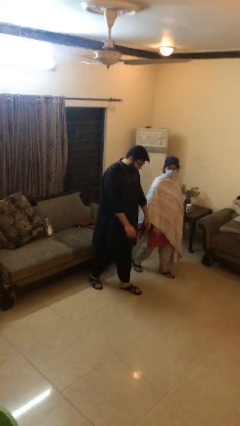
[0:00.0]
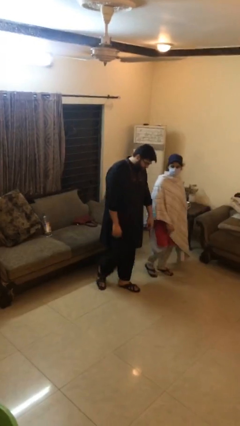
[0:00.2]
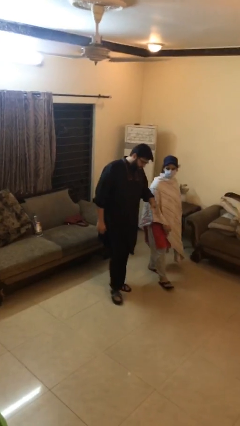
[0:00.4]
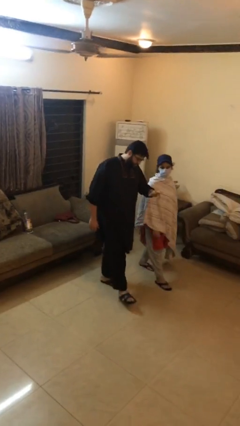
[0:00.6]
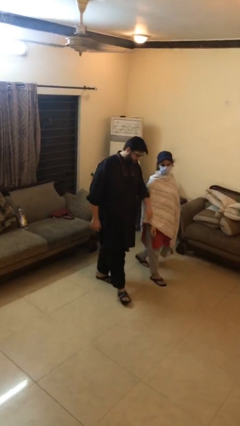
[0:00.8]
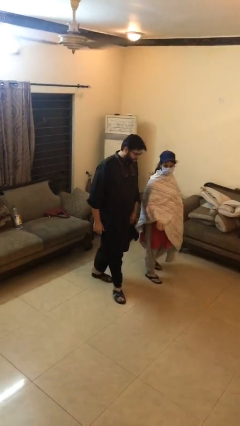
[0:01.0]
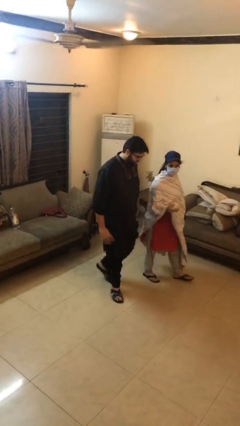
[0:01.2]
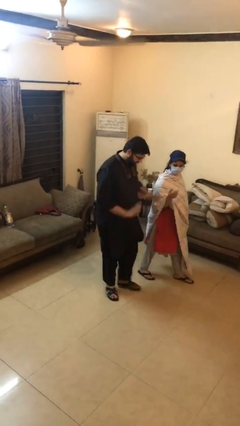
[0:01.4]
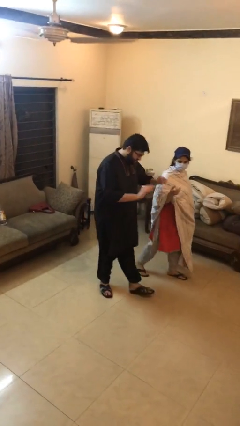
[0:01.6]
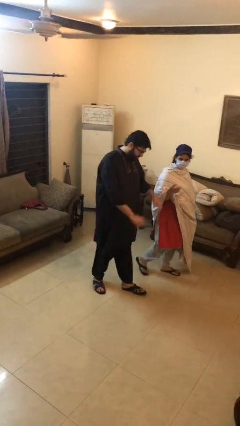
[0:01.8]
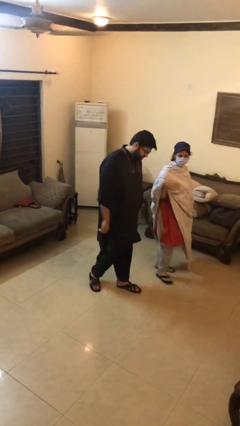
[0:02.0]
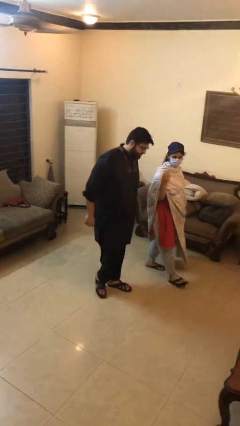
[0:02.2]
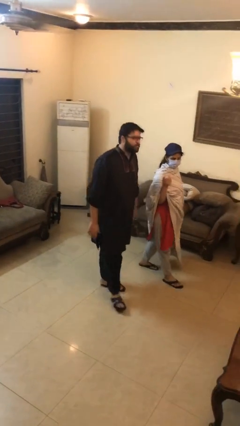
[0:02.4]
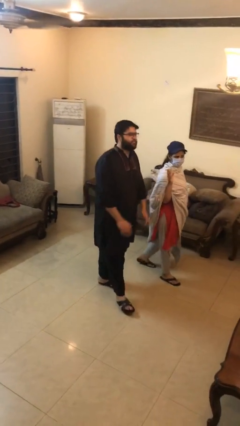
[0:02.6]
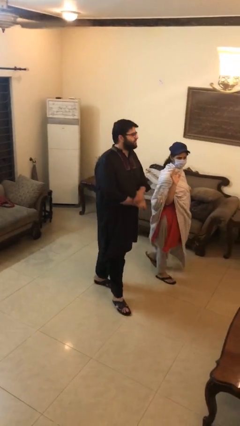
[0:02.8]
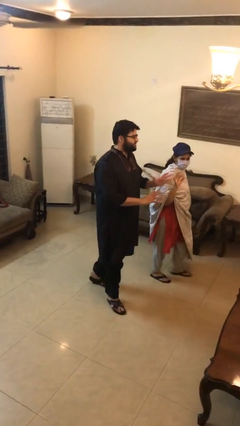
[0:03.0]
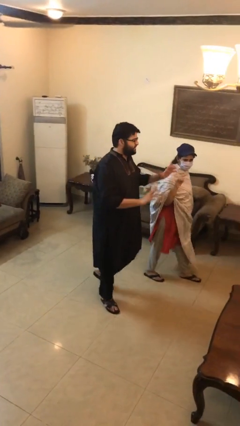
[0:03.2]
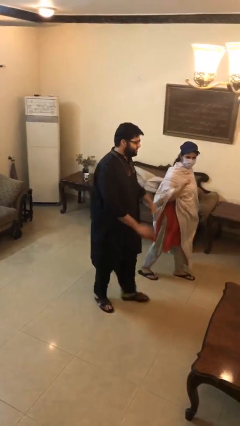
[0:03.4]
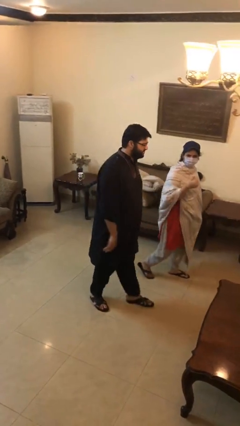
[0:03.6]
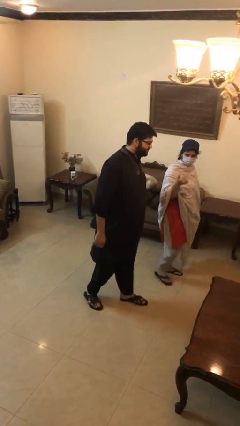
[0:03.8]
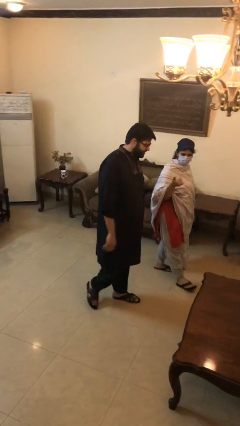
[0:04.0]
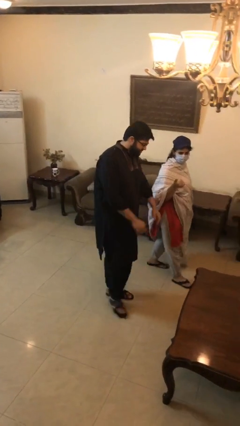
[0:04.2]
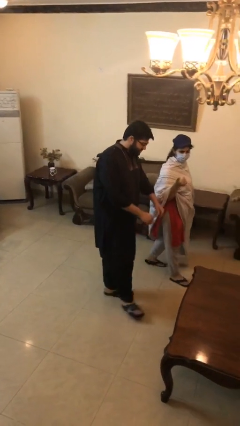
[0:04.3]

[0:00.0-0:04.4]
person talks to person

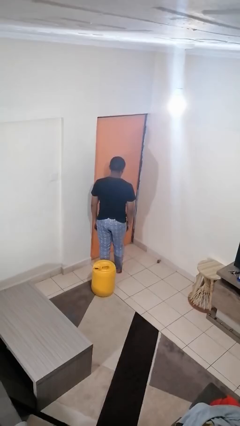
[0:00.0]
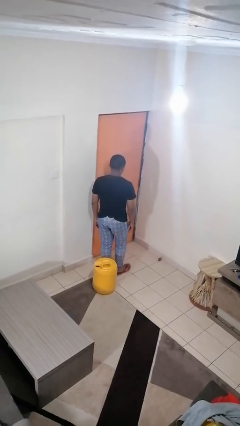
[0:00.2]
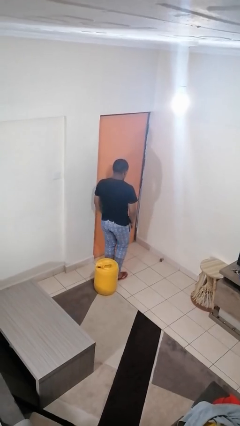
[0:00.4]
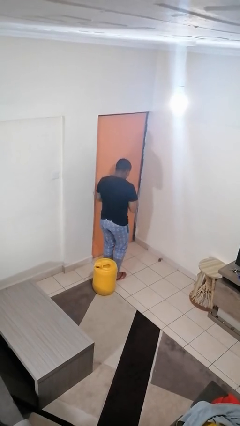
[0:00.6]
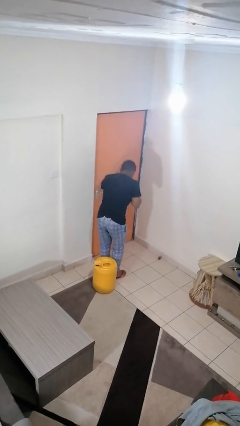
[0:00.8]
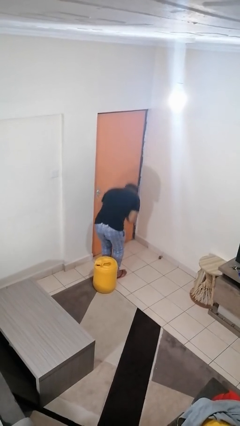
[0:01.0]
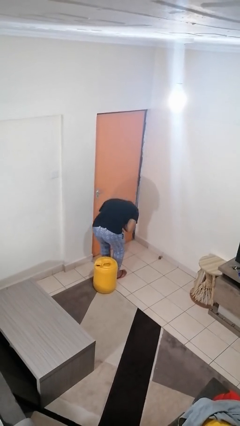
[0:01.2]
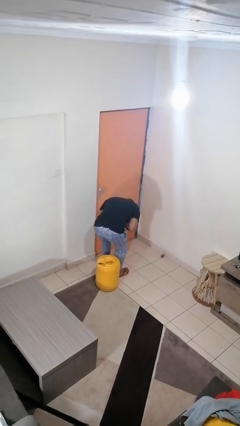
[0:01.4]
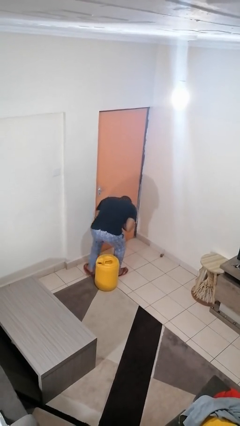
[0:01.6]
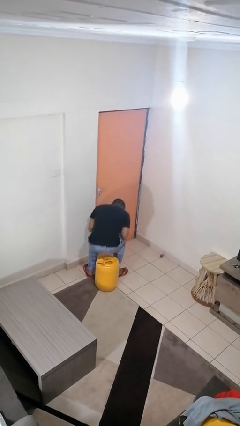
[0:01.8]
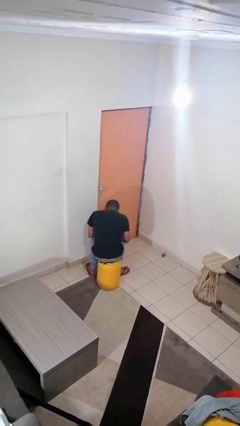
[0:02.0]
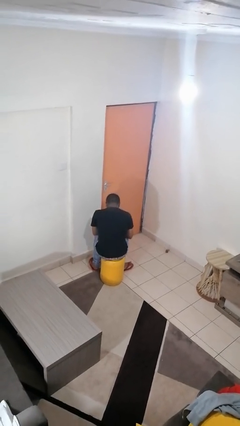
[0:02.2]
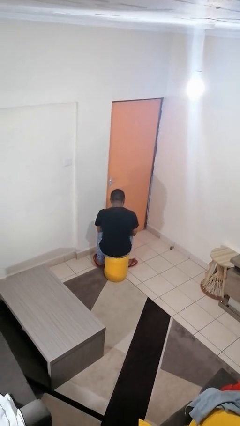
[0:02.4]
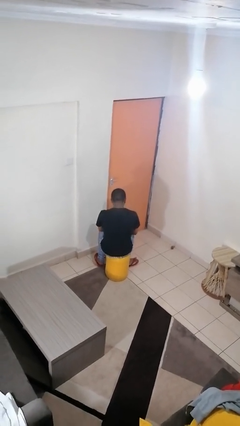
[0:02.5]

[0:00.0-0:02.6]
person sneezes into hand

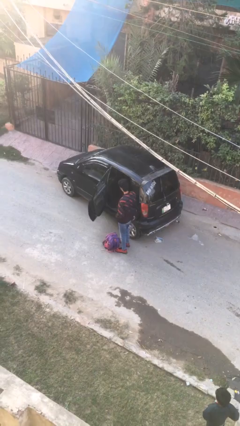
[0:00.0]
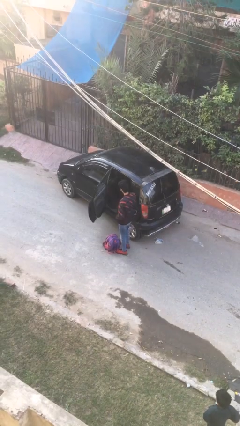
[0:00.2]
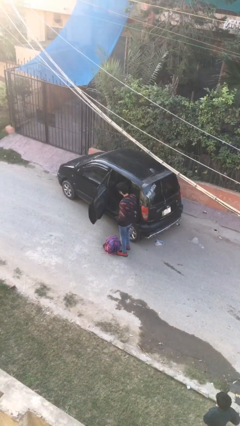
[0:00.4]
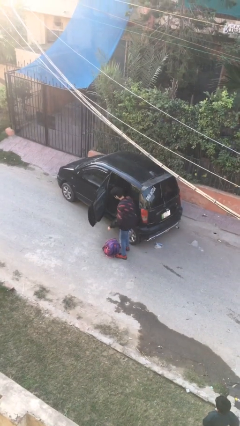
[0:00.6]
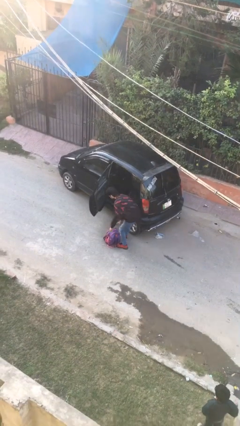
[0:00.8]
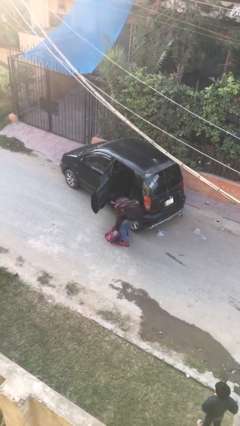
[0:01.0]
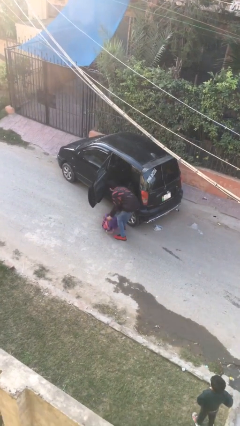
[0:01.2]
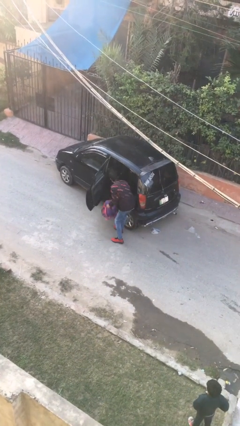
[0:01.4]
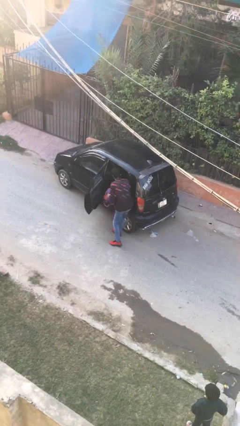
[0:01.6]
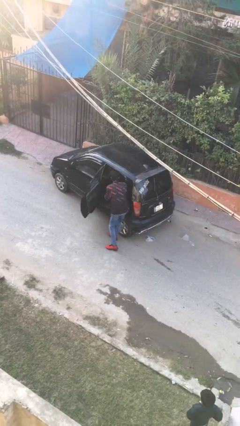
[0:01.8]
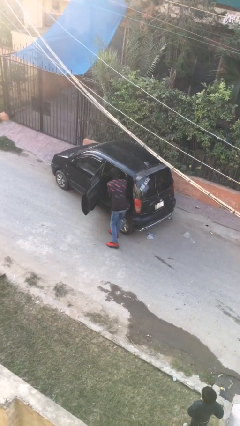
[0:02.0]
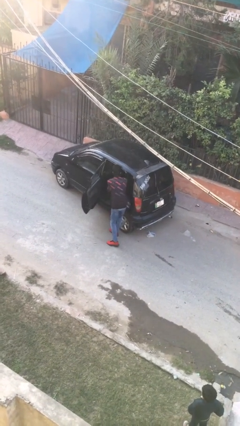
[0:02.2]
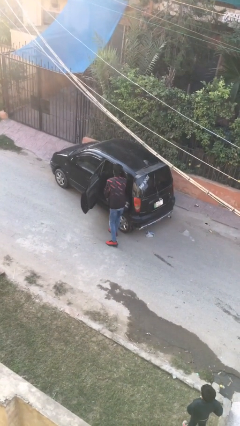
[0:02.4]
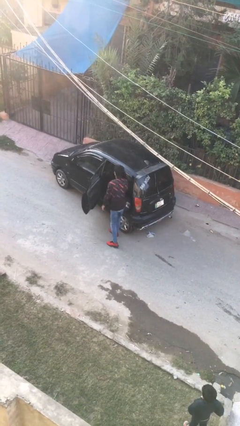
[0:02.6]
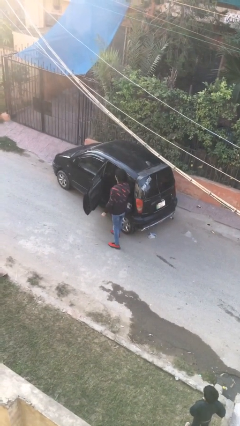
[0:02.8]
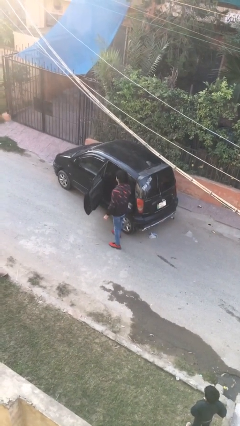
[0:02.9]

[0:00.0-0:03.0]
person loads car

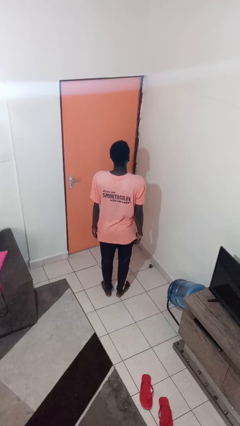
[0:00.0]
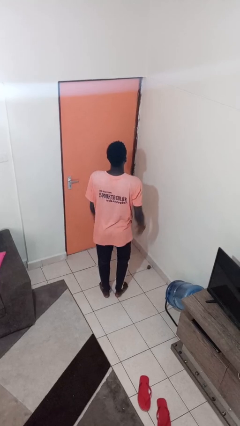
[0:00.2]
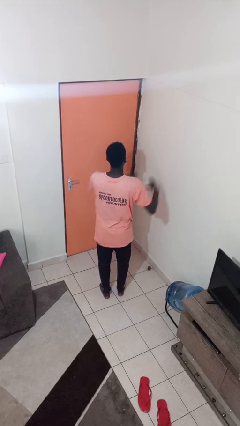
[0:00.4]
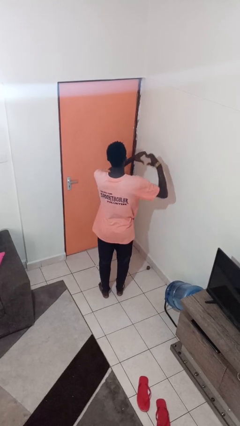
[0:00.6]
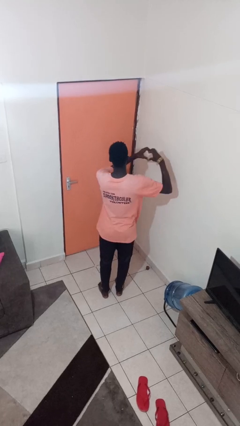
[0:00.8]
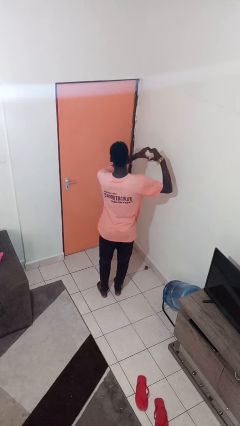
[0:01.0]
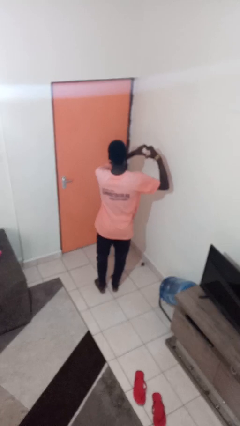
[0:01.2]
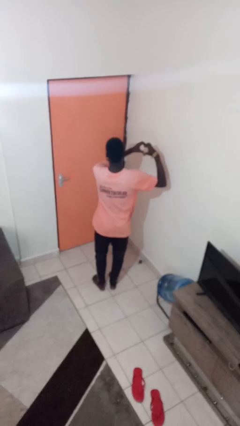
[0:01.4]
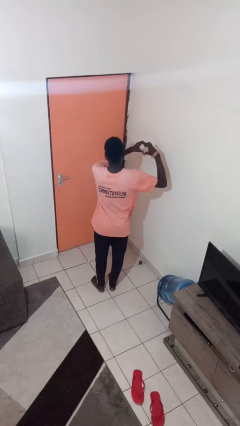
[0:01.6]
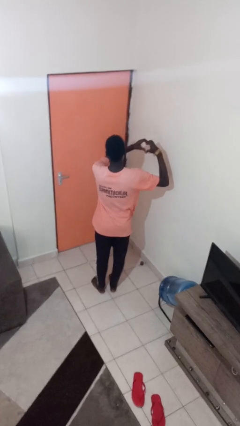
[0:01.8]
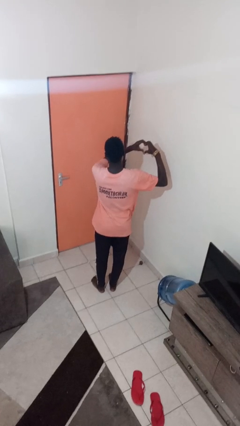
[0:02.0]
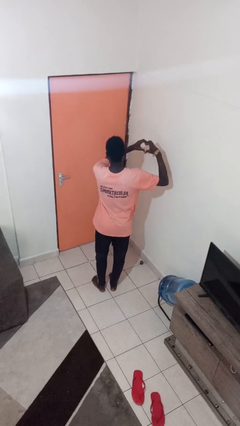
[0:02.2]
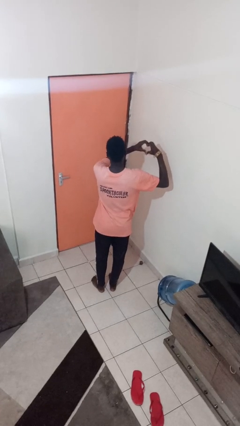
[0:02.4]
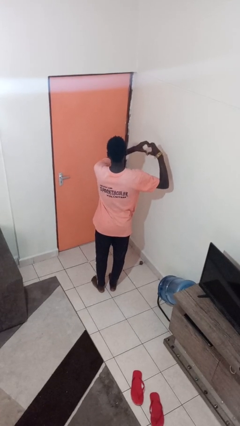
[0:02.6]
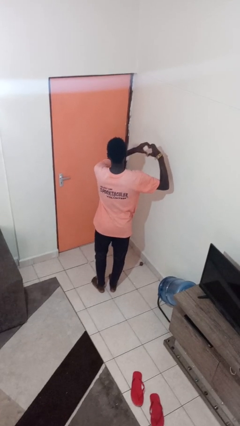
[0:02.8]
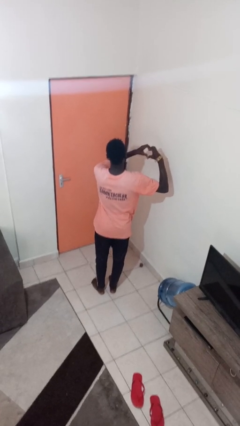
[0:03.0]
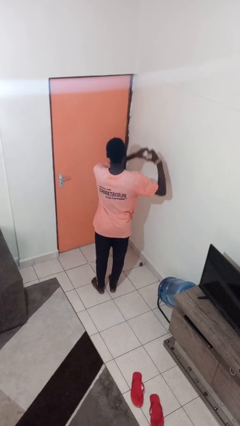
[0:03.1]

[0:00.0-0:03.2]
person gestures heart

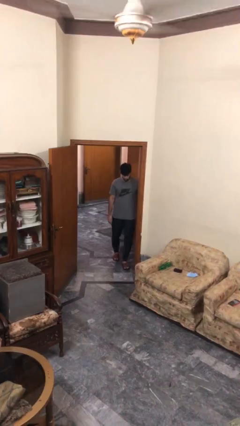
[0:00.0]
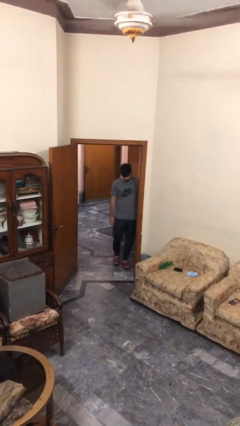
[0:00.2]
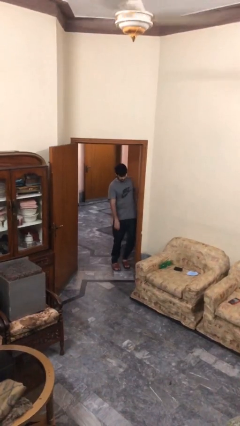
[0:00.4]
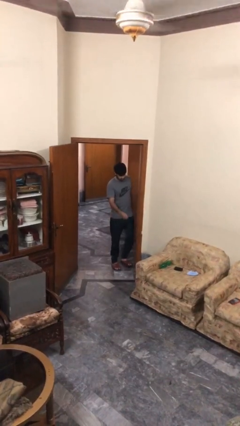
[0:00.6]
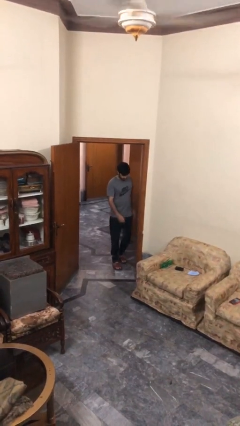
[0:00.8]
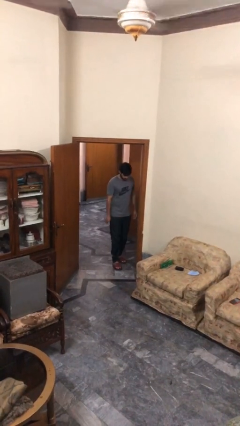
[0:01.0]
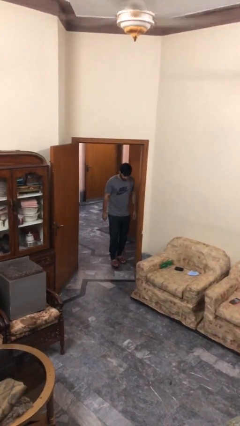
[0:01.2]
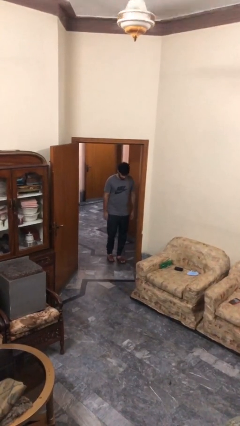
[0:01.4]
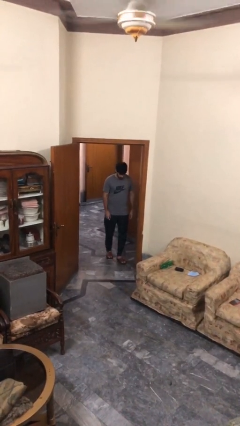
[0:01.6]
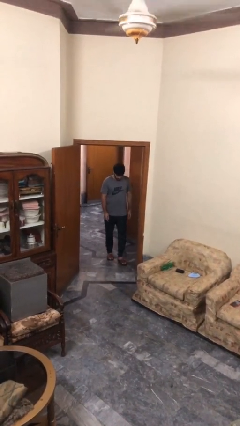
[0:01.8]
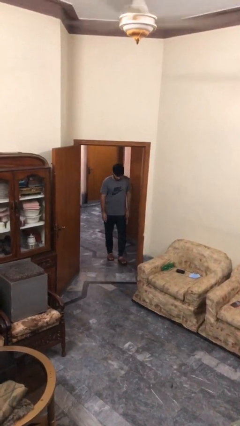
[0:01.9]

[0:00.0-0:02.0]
person bumps into wall

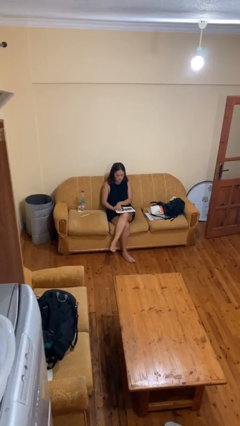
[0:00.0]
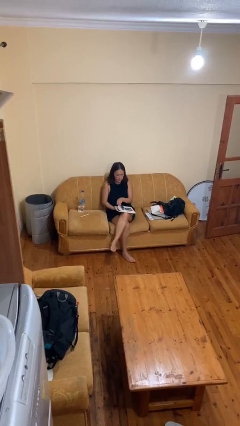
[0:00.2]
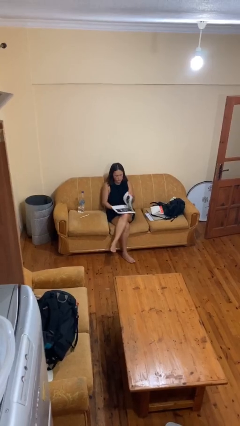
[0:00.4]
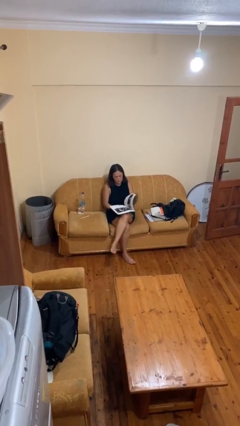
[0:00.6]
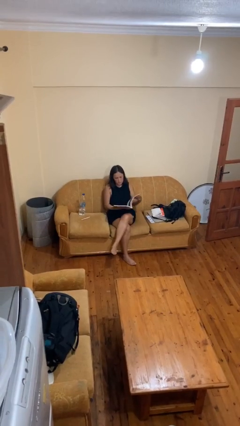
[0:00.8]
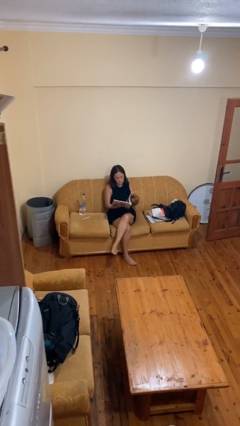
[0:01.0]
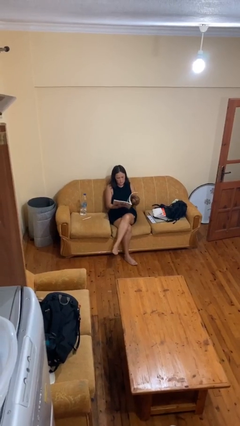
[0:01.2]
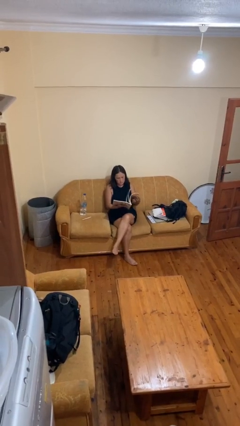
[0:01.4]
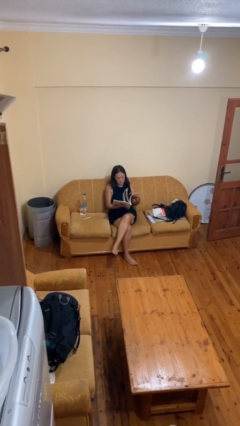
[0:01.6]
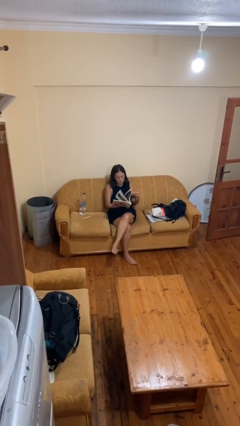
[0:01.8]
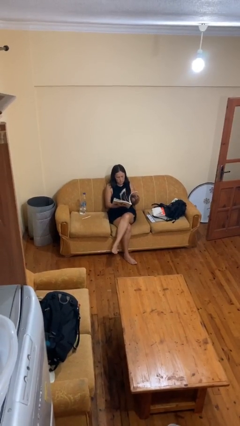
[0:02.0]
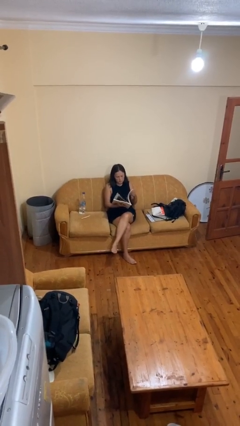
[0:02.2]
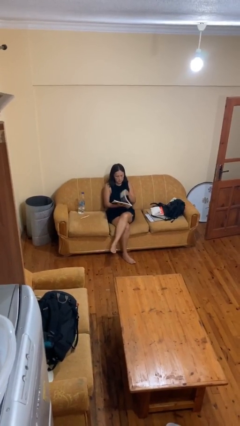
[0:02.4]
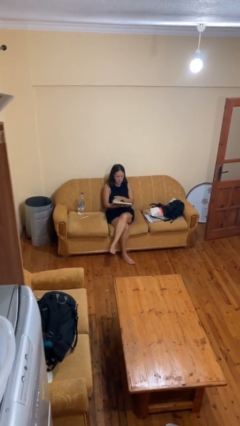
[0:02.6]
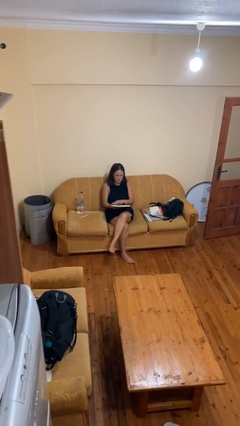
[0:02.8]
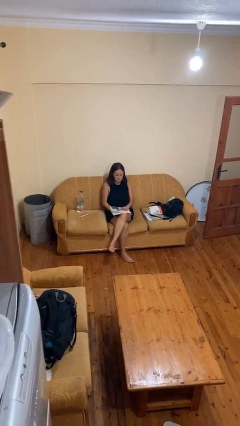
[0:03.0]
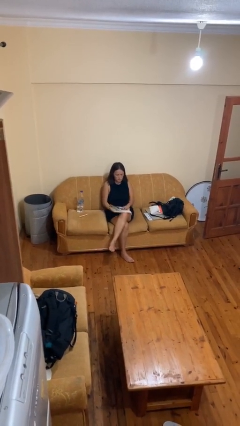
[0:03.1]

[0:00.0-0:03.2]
person reads magazine
